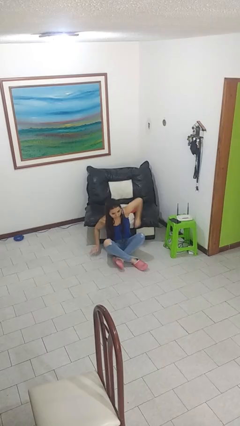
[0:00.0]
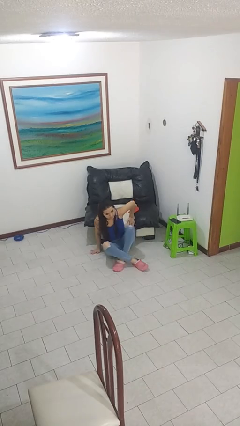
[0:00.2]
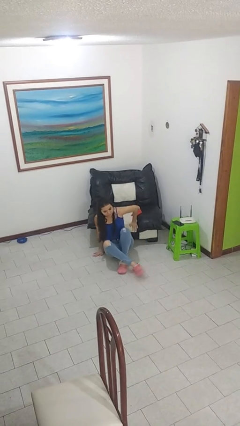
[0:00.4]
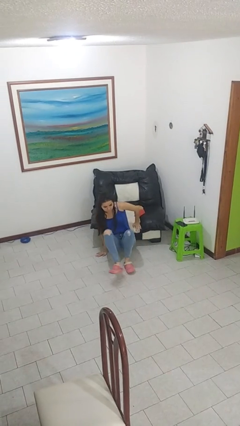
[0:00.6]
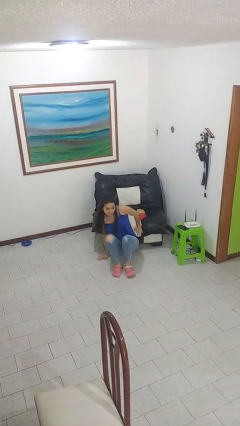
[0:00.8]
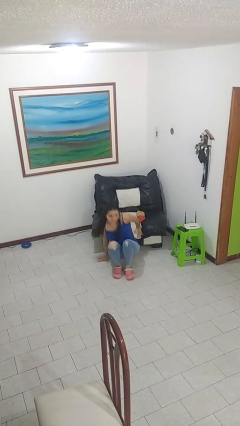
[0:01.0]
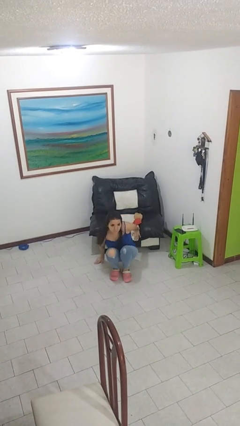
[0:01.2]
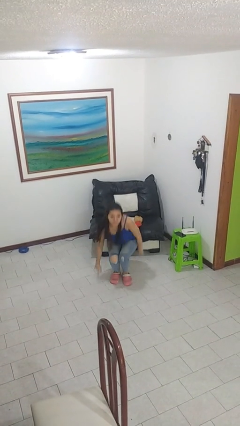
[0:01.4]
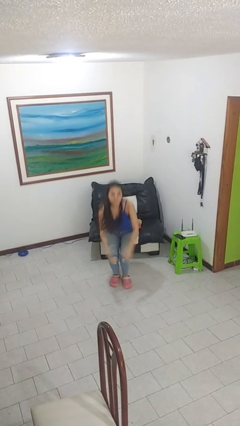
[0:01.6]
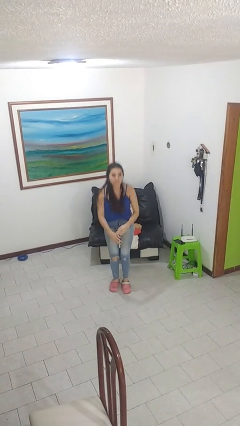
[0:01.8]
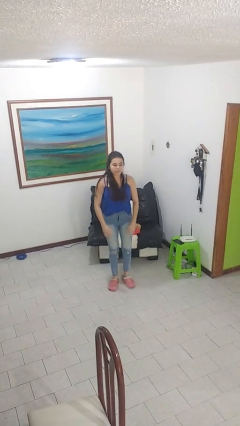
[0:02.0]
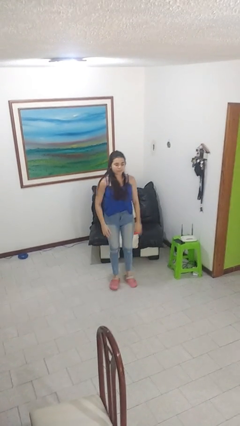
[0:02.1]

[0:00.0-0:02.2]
person stands up from floor

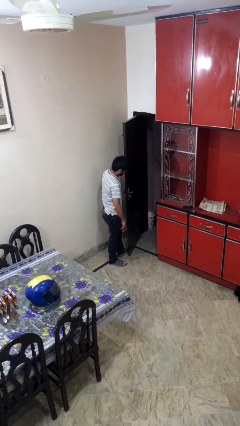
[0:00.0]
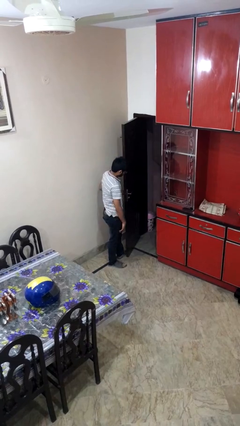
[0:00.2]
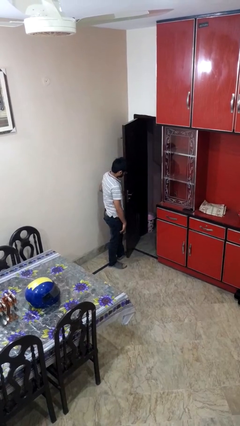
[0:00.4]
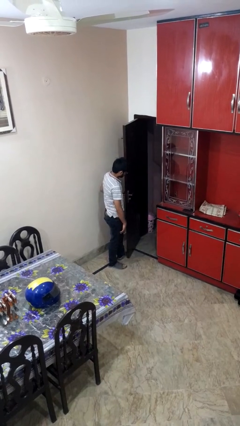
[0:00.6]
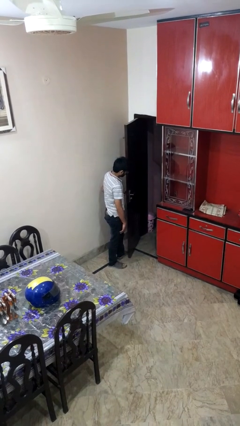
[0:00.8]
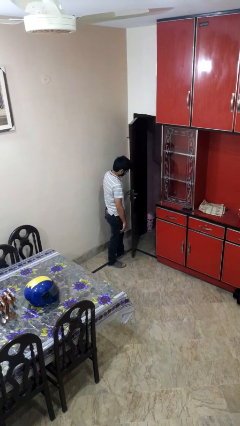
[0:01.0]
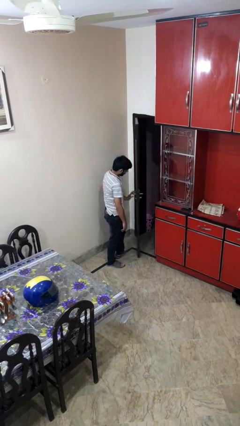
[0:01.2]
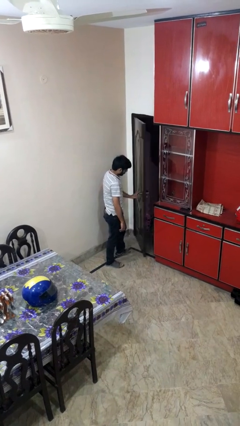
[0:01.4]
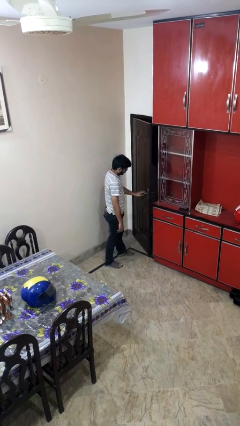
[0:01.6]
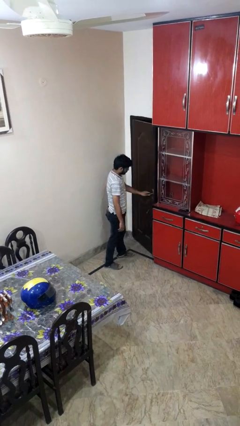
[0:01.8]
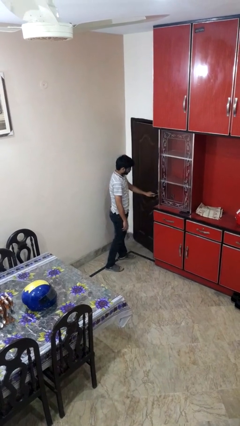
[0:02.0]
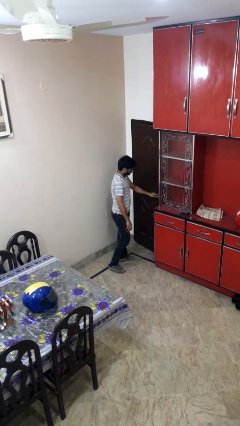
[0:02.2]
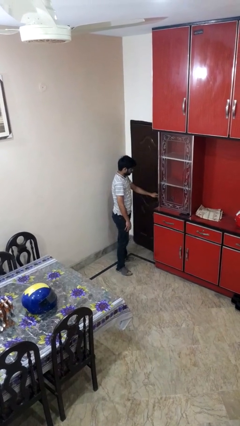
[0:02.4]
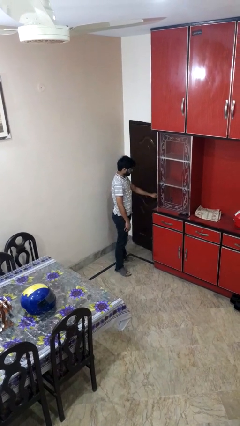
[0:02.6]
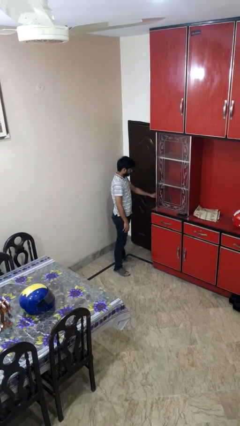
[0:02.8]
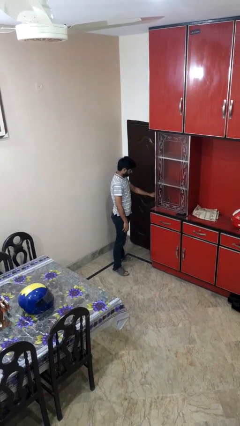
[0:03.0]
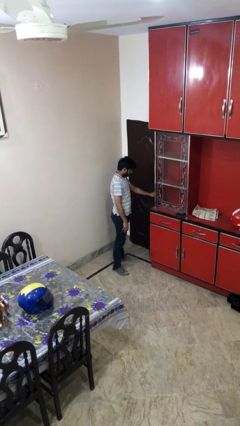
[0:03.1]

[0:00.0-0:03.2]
person closes facility door

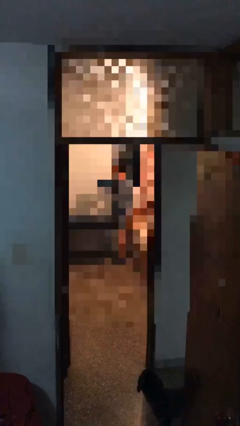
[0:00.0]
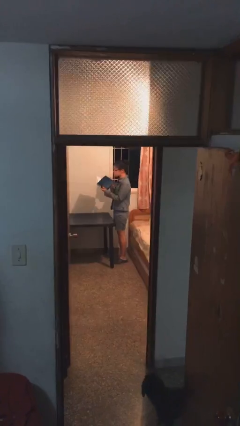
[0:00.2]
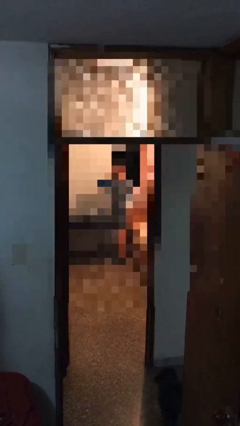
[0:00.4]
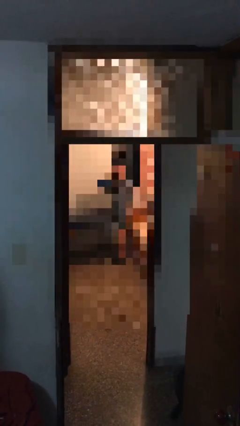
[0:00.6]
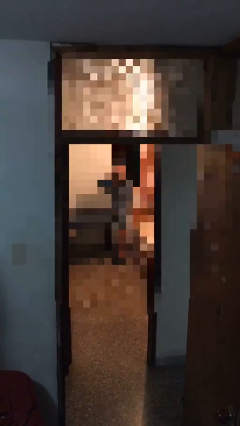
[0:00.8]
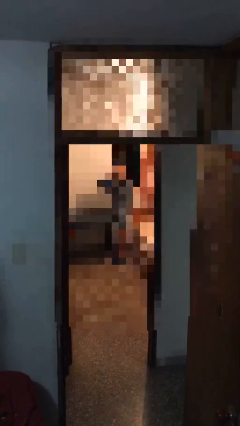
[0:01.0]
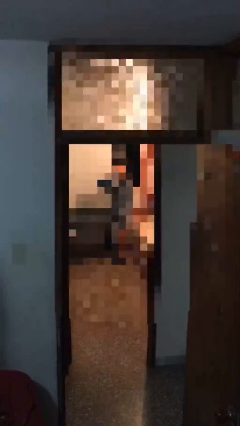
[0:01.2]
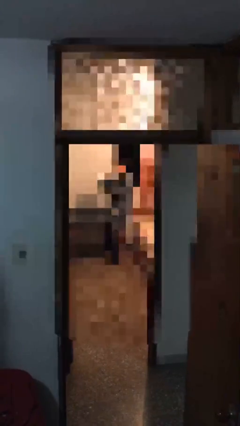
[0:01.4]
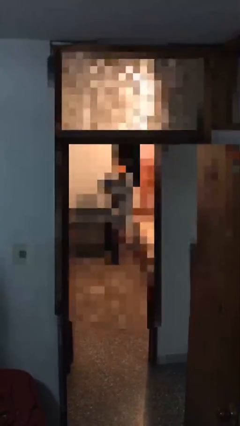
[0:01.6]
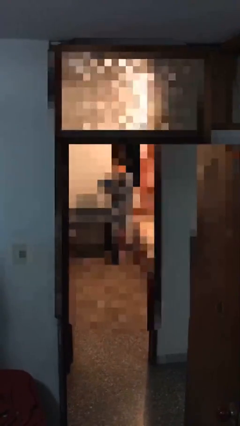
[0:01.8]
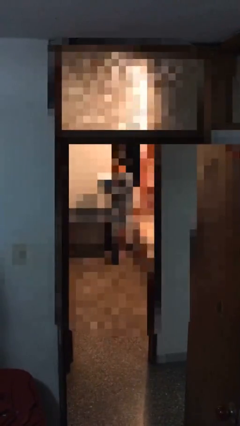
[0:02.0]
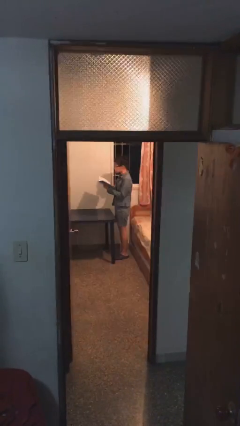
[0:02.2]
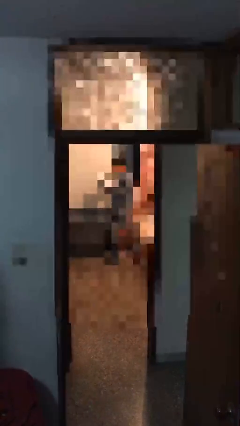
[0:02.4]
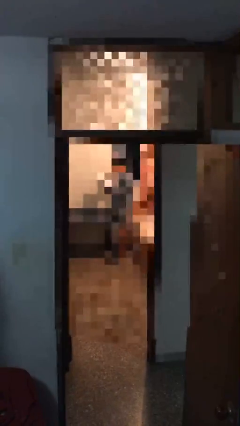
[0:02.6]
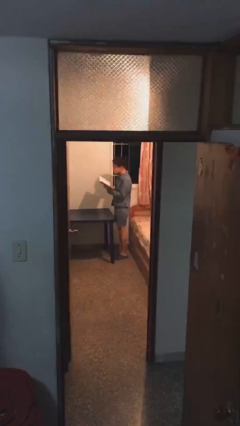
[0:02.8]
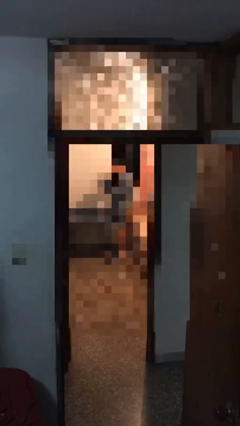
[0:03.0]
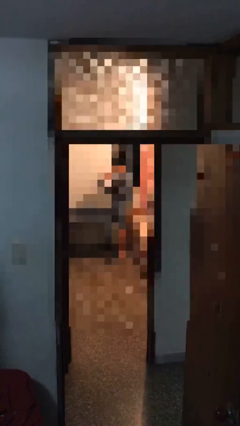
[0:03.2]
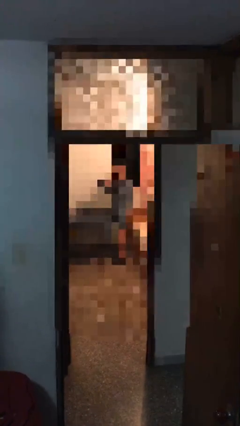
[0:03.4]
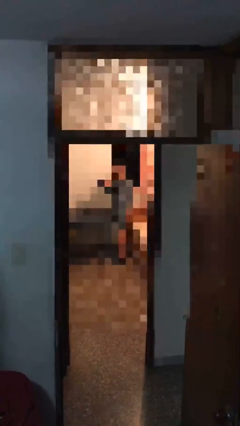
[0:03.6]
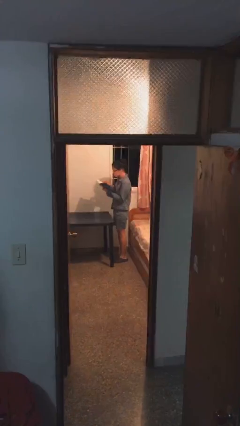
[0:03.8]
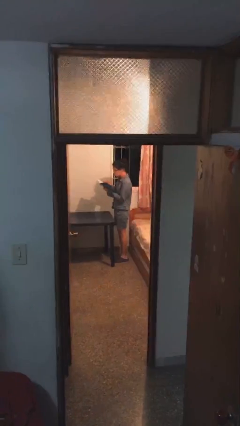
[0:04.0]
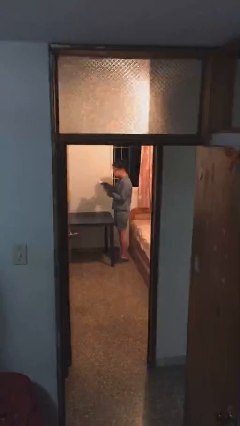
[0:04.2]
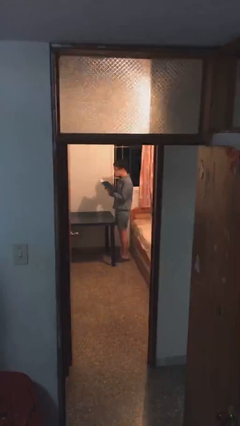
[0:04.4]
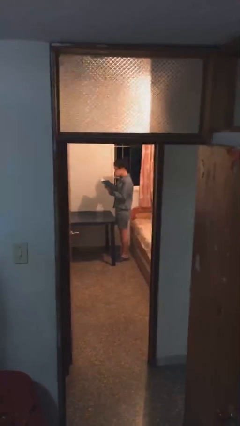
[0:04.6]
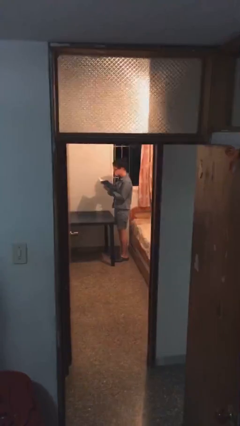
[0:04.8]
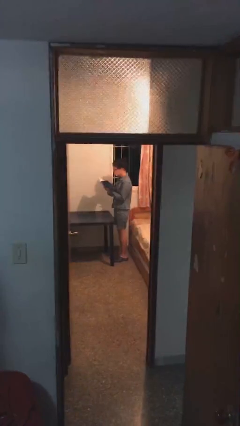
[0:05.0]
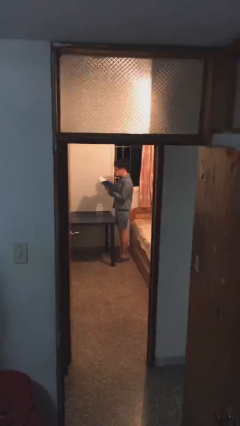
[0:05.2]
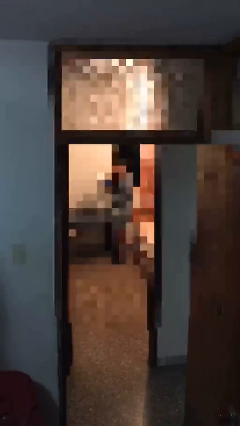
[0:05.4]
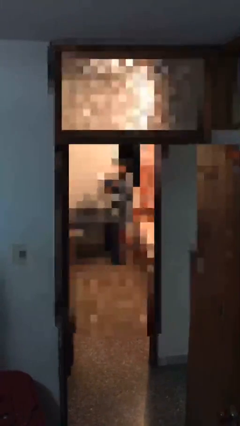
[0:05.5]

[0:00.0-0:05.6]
person reads document

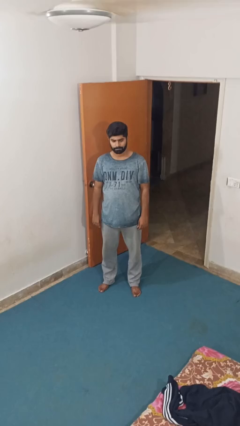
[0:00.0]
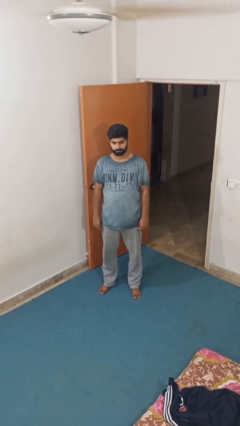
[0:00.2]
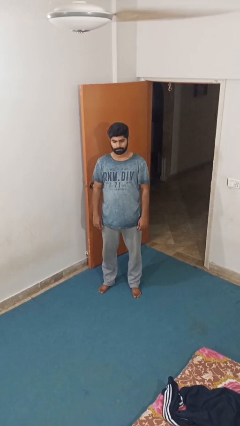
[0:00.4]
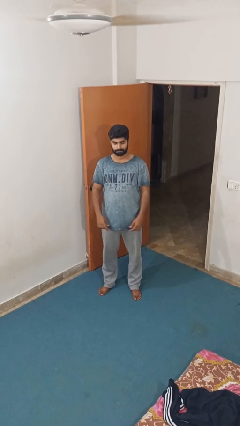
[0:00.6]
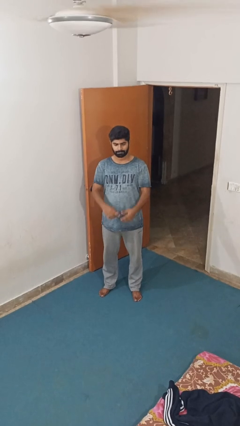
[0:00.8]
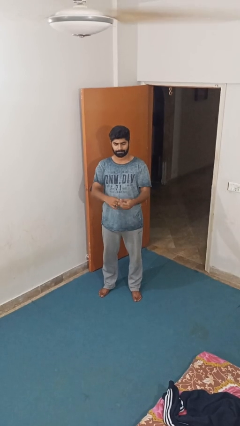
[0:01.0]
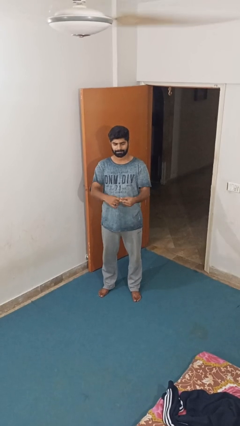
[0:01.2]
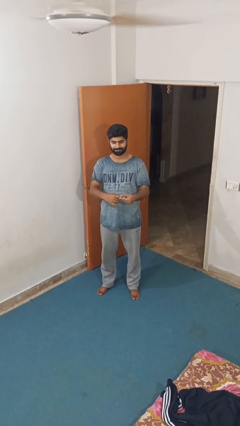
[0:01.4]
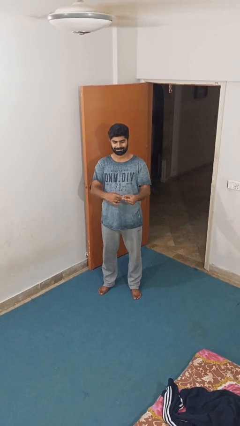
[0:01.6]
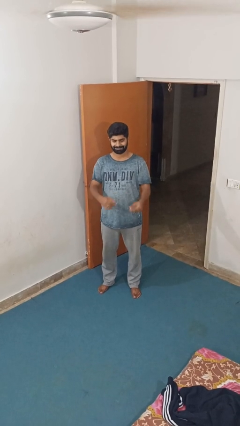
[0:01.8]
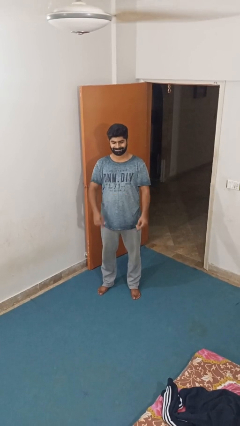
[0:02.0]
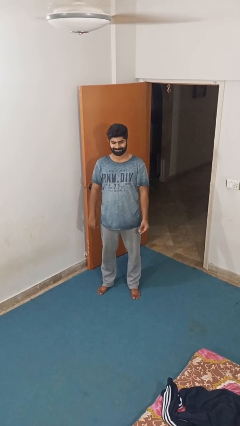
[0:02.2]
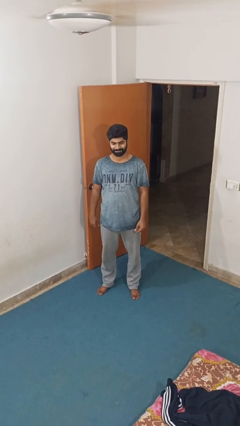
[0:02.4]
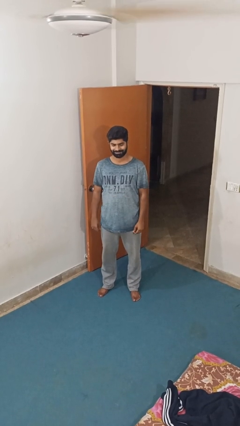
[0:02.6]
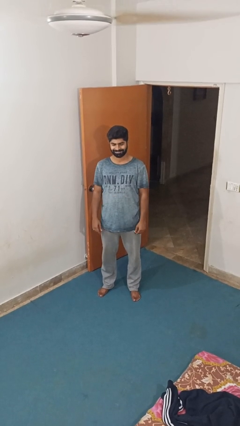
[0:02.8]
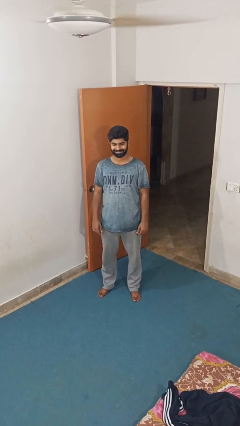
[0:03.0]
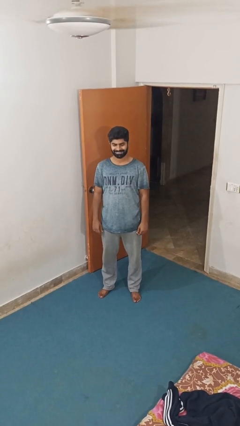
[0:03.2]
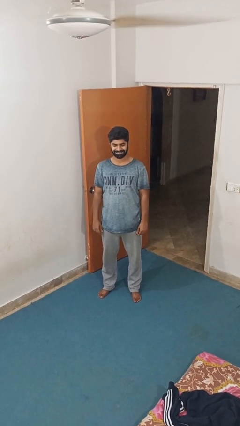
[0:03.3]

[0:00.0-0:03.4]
person takes off ring

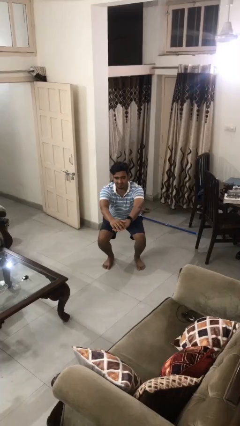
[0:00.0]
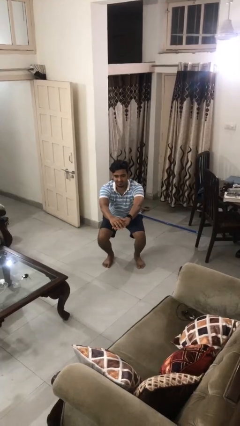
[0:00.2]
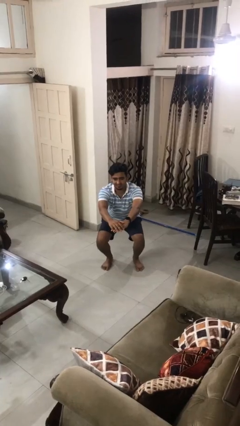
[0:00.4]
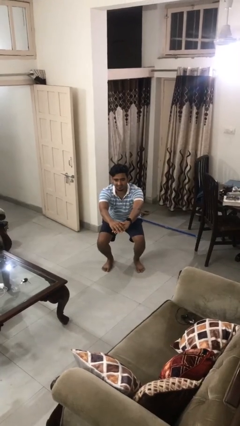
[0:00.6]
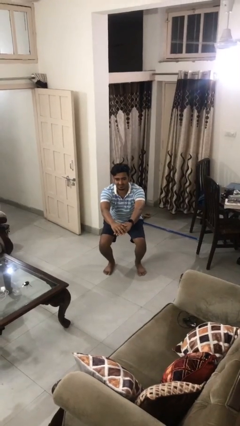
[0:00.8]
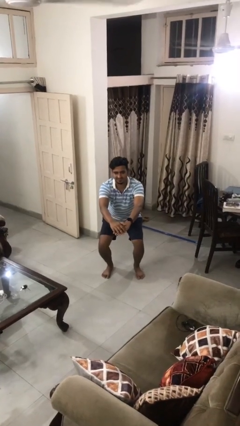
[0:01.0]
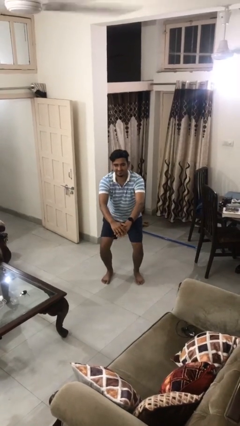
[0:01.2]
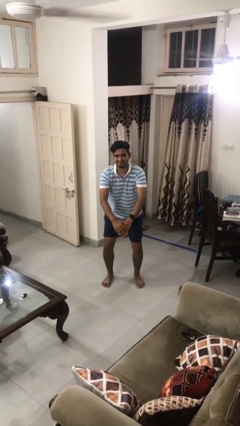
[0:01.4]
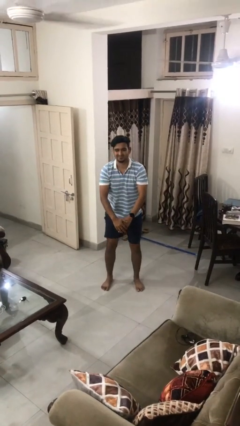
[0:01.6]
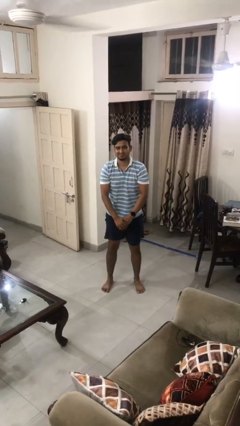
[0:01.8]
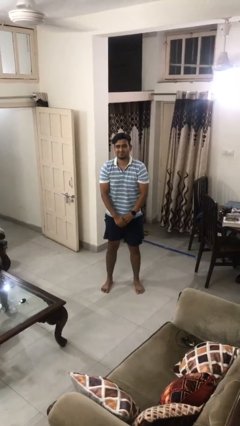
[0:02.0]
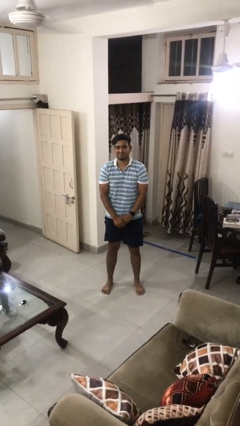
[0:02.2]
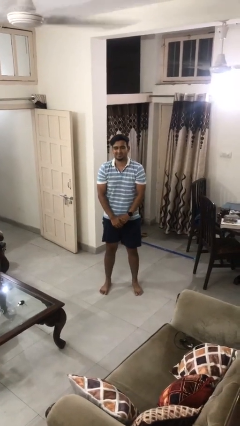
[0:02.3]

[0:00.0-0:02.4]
person stands up

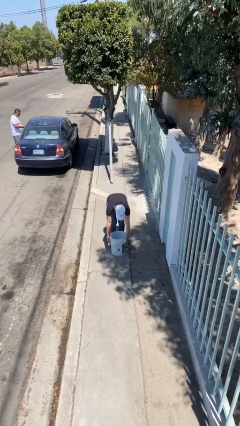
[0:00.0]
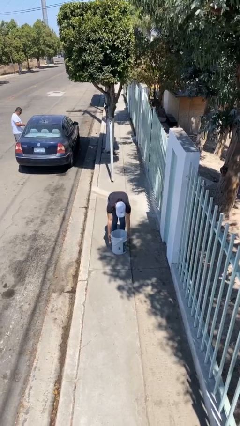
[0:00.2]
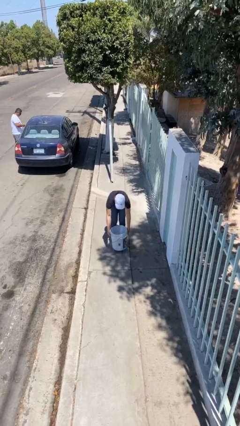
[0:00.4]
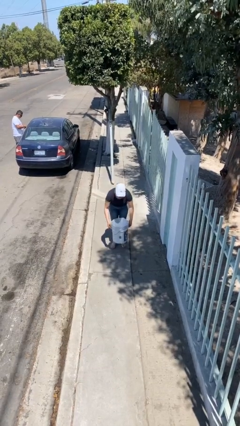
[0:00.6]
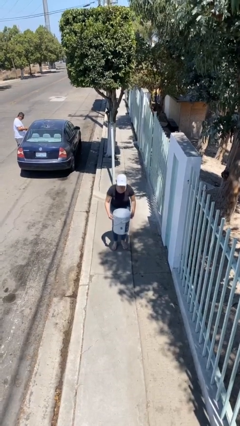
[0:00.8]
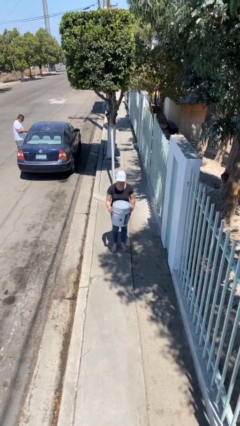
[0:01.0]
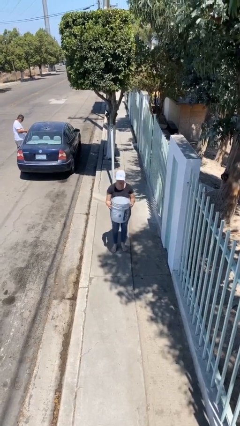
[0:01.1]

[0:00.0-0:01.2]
person picks up object from floor
